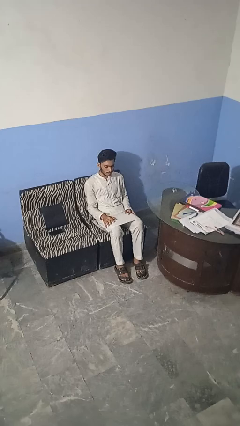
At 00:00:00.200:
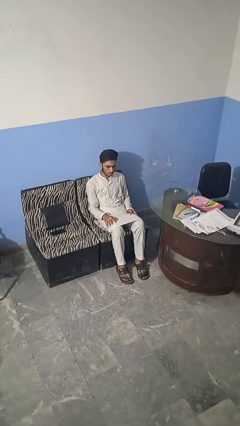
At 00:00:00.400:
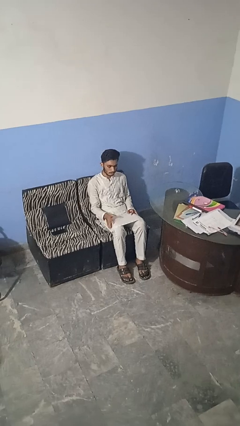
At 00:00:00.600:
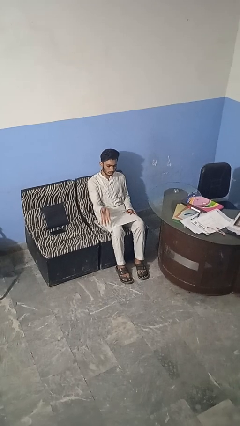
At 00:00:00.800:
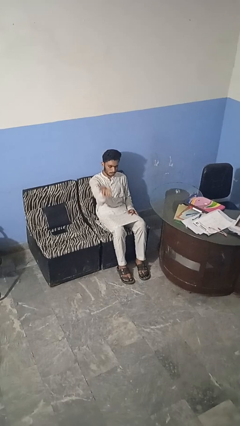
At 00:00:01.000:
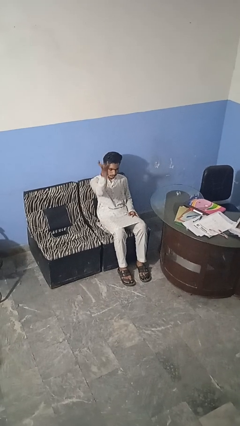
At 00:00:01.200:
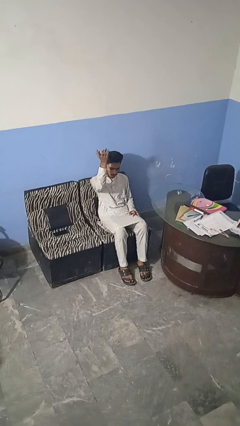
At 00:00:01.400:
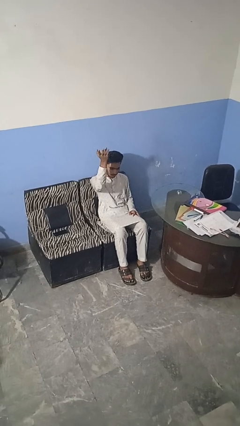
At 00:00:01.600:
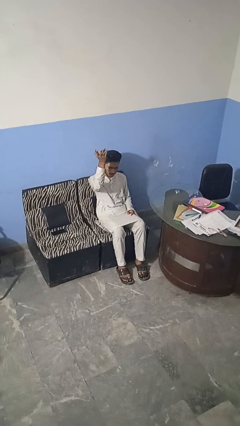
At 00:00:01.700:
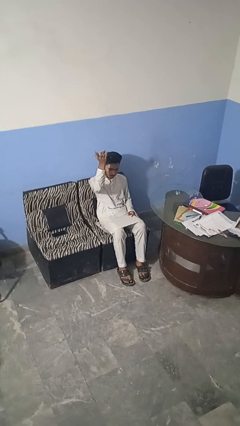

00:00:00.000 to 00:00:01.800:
person gestures swipe up

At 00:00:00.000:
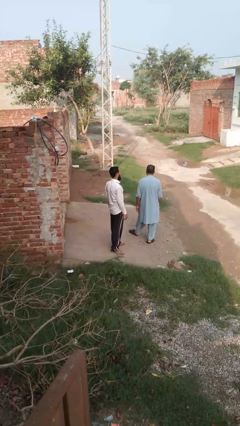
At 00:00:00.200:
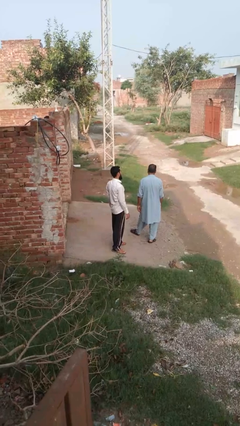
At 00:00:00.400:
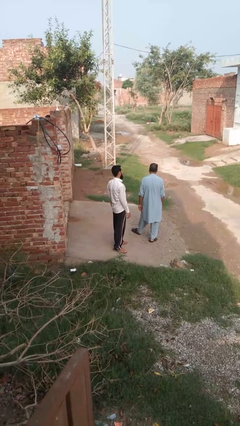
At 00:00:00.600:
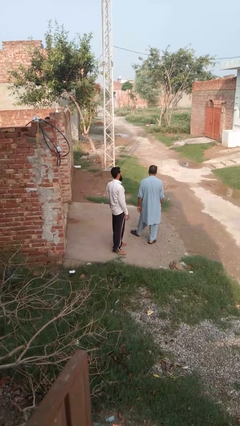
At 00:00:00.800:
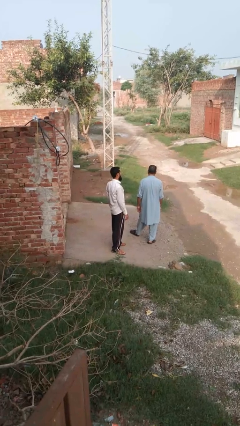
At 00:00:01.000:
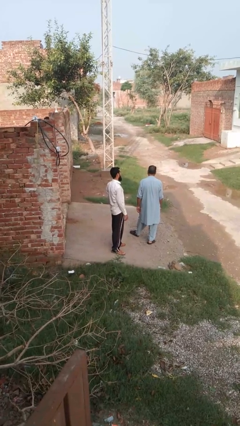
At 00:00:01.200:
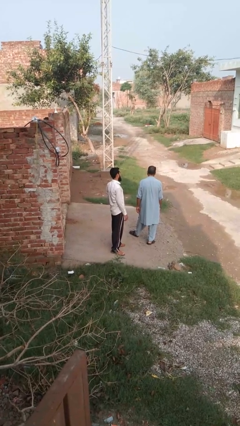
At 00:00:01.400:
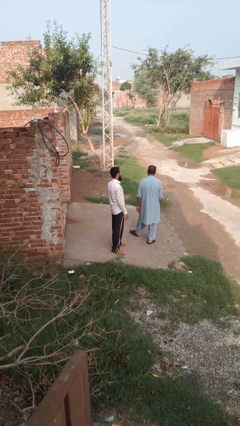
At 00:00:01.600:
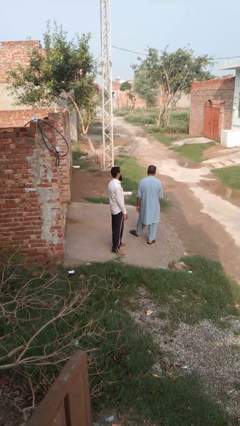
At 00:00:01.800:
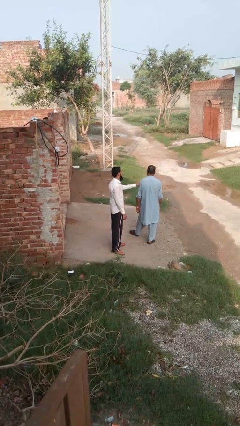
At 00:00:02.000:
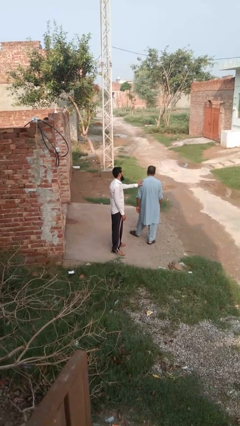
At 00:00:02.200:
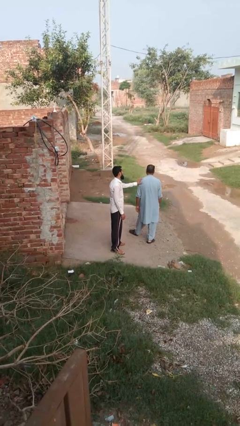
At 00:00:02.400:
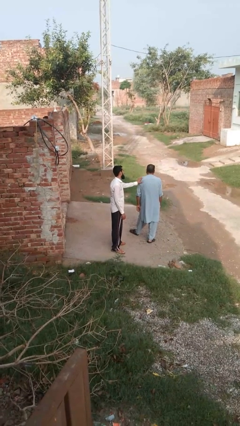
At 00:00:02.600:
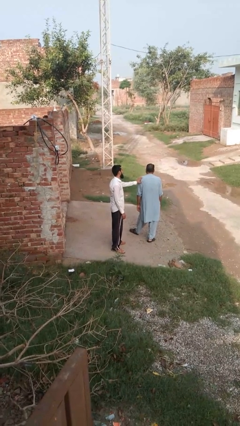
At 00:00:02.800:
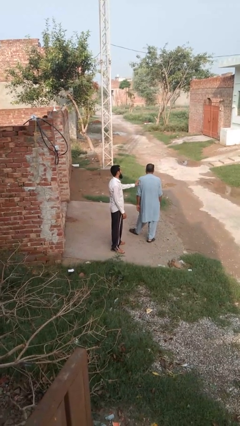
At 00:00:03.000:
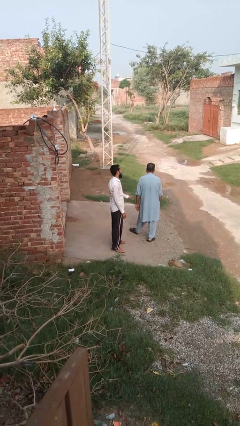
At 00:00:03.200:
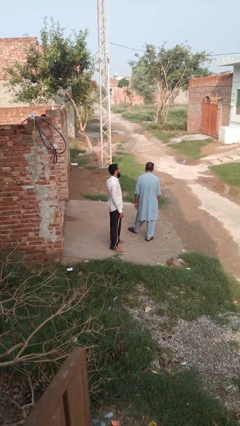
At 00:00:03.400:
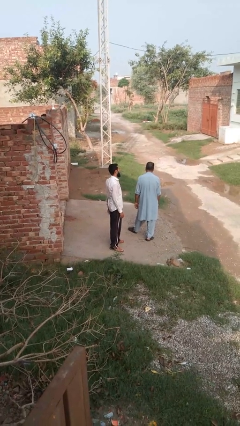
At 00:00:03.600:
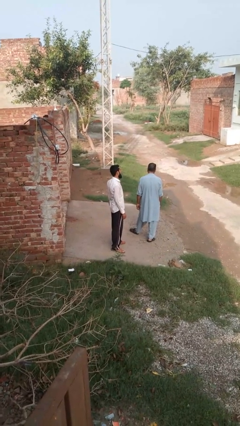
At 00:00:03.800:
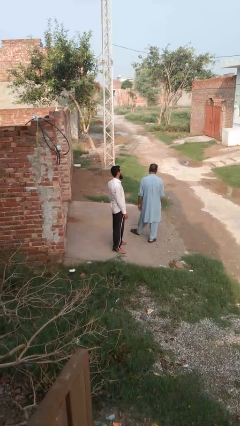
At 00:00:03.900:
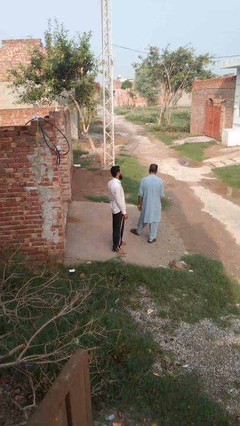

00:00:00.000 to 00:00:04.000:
person touches back of person

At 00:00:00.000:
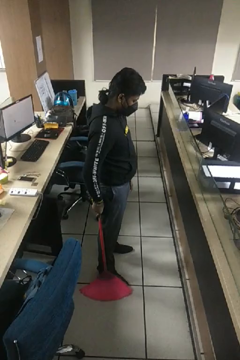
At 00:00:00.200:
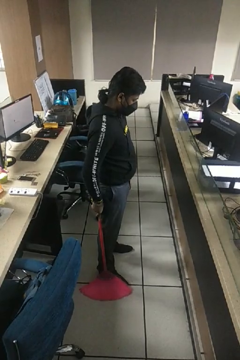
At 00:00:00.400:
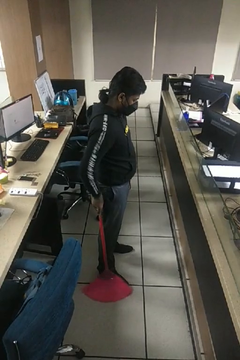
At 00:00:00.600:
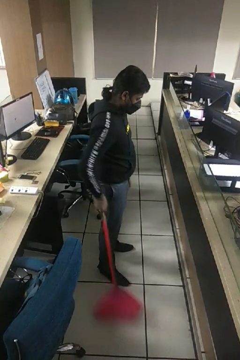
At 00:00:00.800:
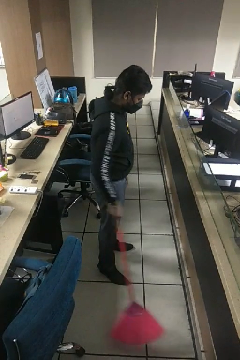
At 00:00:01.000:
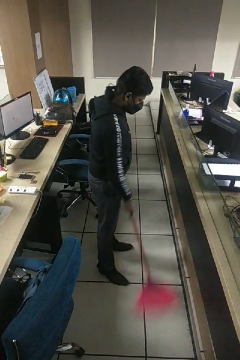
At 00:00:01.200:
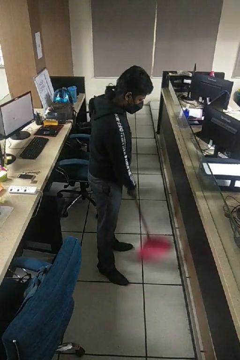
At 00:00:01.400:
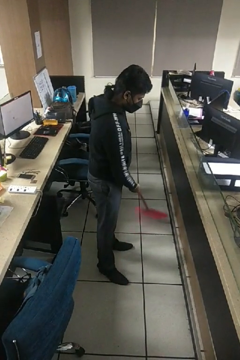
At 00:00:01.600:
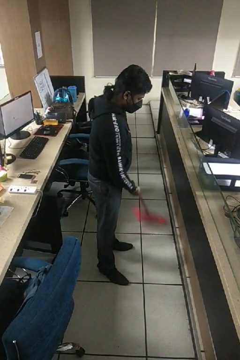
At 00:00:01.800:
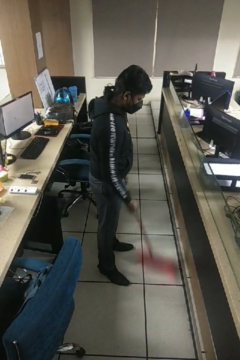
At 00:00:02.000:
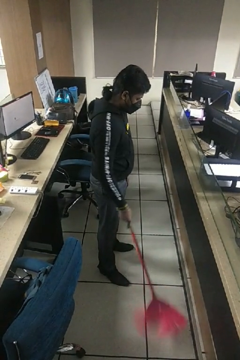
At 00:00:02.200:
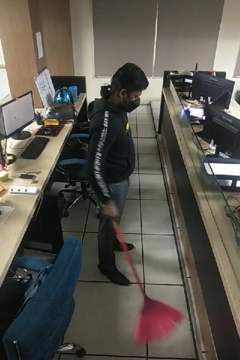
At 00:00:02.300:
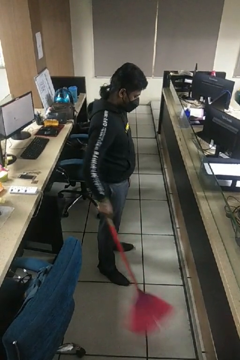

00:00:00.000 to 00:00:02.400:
person sweeps floor

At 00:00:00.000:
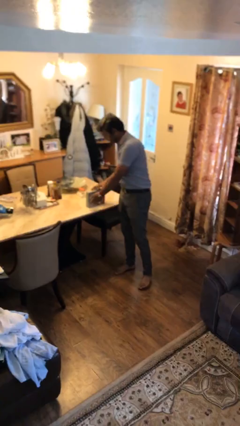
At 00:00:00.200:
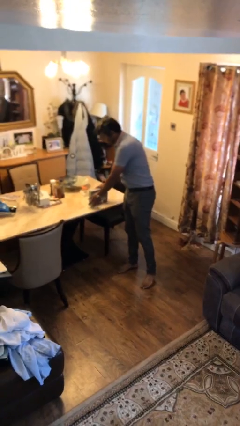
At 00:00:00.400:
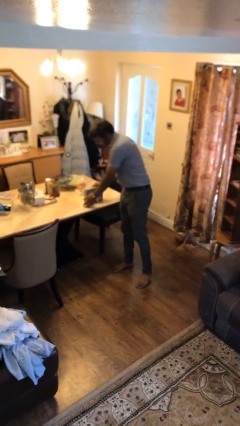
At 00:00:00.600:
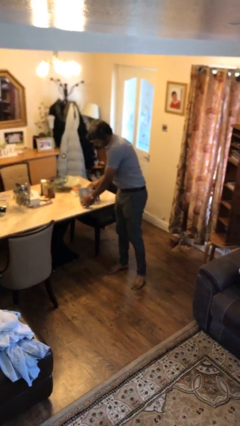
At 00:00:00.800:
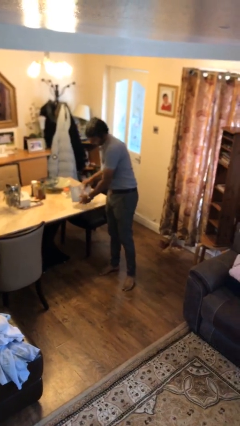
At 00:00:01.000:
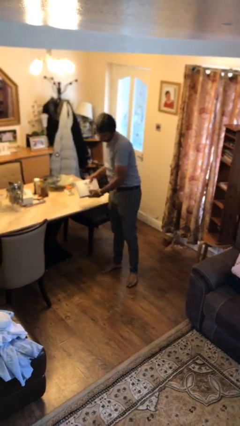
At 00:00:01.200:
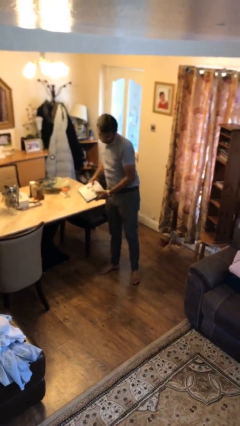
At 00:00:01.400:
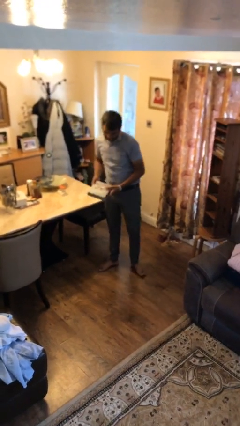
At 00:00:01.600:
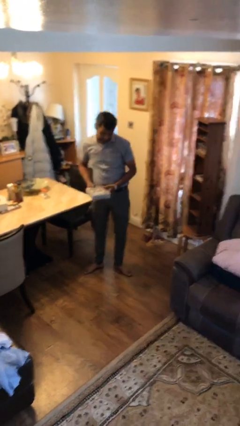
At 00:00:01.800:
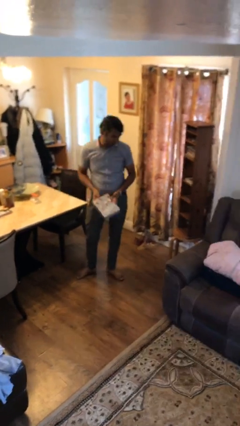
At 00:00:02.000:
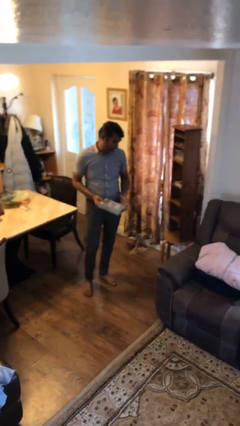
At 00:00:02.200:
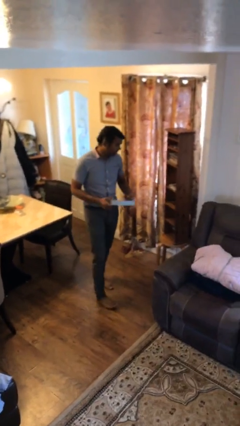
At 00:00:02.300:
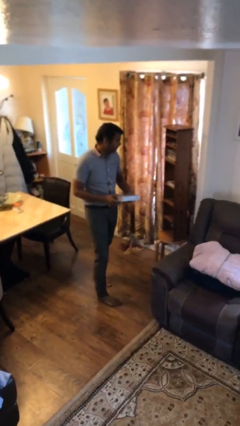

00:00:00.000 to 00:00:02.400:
person picks up object from table

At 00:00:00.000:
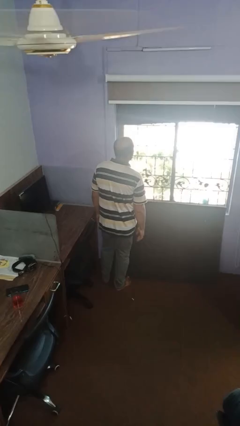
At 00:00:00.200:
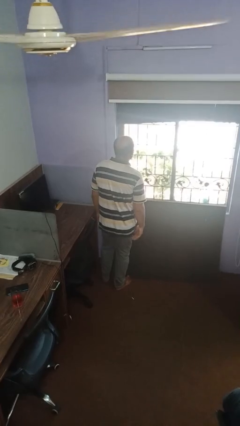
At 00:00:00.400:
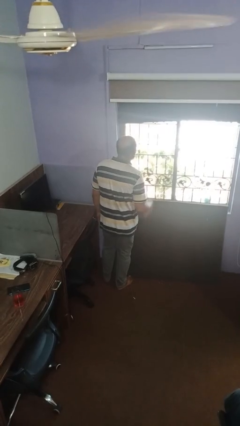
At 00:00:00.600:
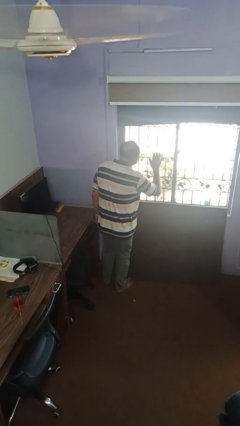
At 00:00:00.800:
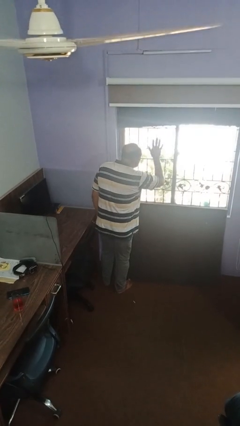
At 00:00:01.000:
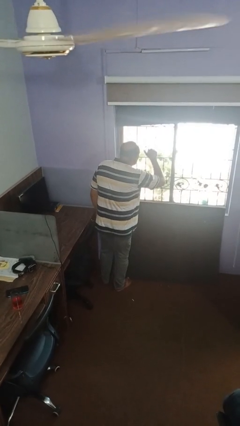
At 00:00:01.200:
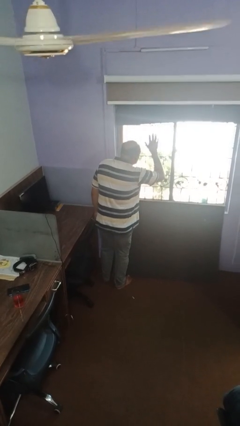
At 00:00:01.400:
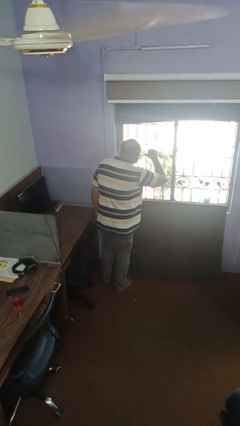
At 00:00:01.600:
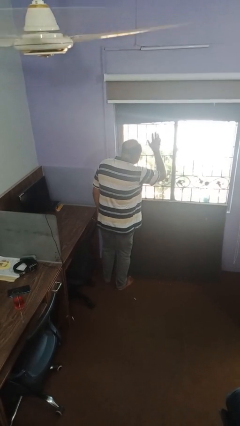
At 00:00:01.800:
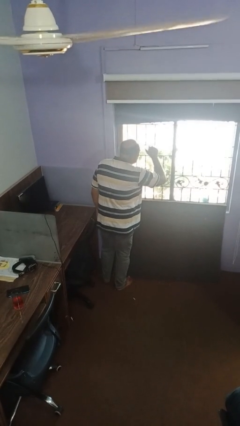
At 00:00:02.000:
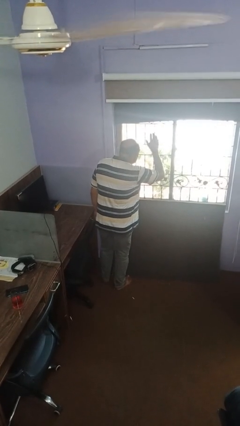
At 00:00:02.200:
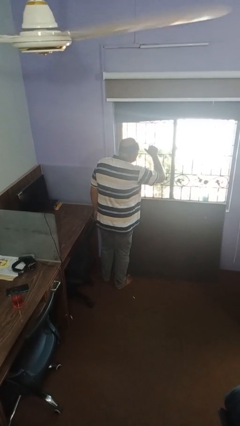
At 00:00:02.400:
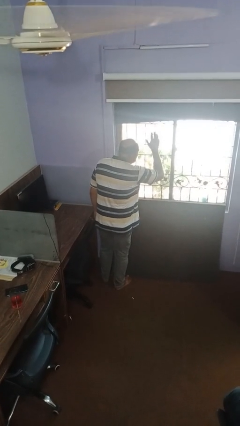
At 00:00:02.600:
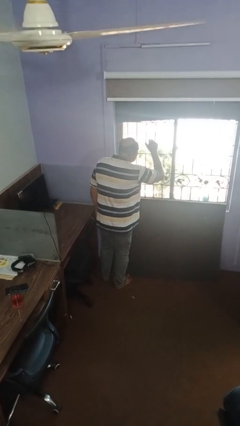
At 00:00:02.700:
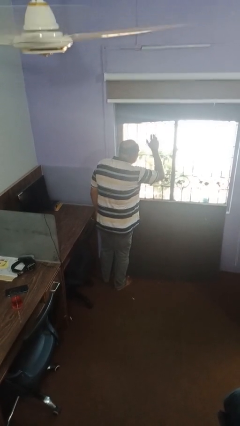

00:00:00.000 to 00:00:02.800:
person gestures come here

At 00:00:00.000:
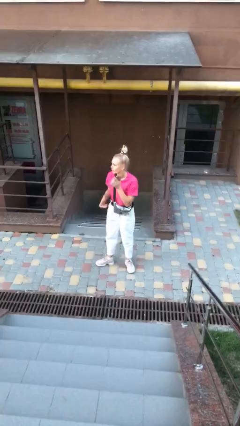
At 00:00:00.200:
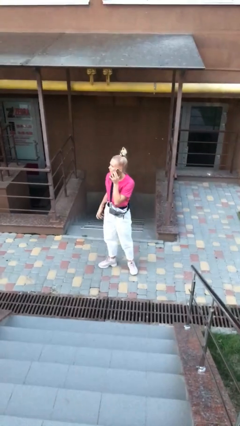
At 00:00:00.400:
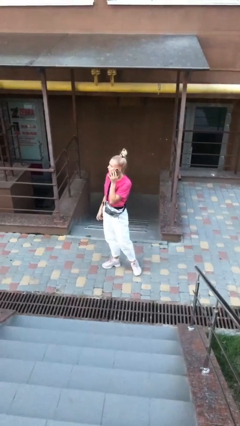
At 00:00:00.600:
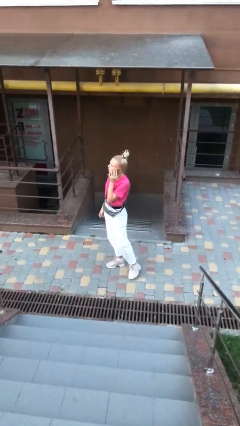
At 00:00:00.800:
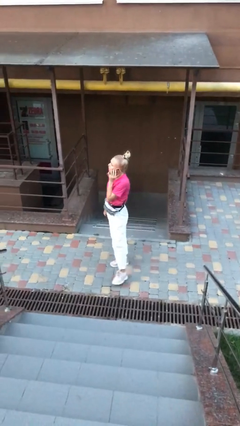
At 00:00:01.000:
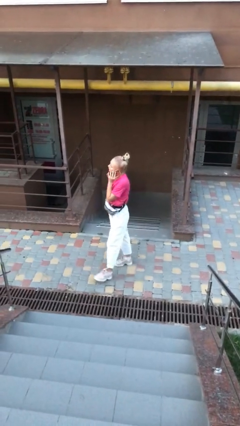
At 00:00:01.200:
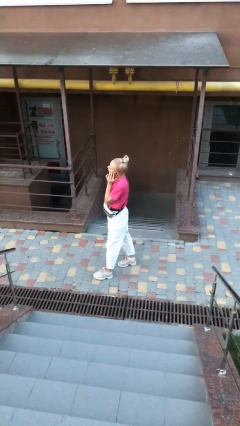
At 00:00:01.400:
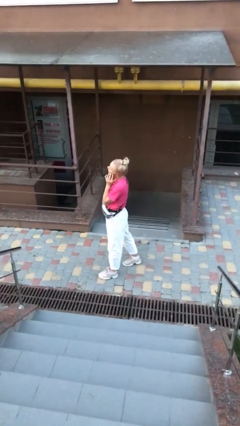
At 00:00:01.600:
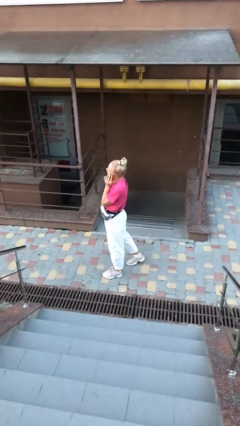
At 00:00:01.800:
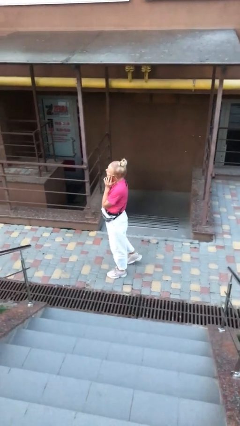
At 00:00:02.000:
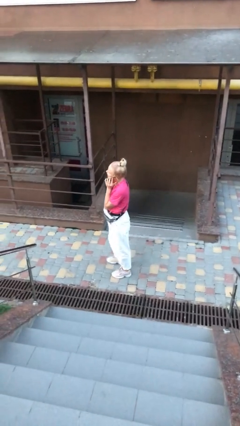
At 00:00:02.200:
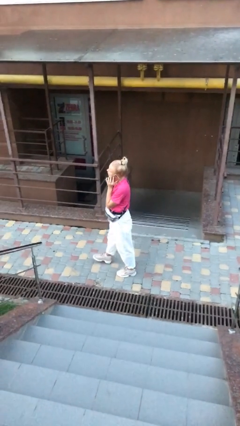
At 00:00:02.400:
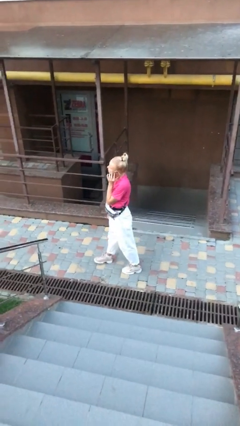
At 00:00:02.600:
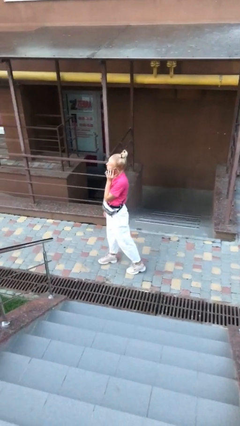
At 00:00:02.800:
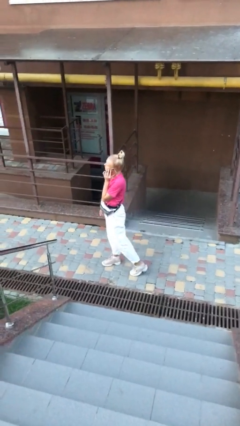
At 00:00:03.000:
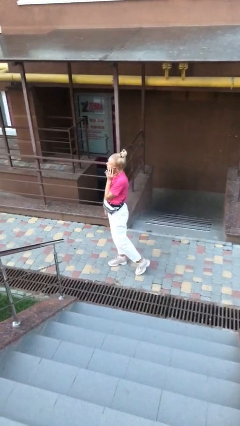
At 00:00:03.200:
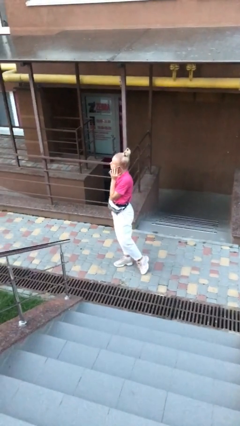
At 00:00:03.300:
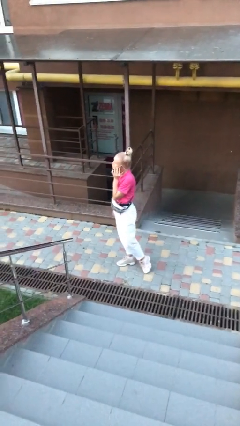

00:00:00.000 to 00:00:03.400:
person talks on phone

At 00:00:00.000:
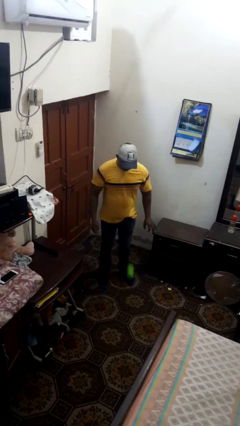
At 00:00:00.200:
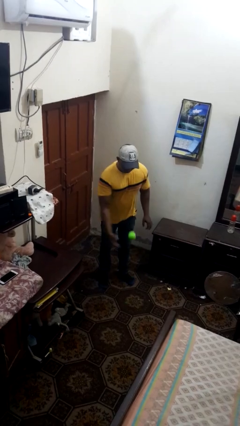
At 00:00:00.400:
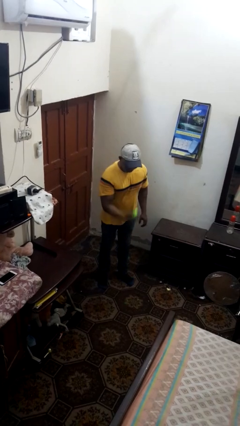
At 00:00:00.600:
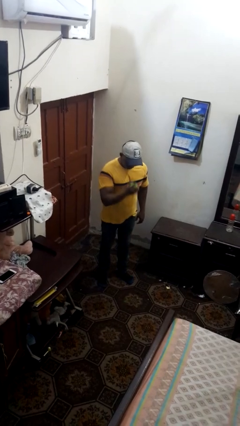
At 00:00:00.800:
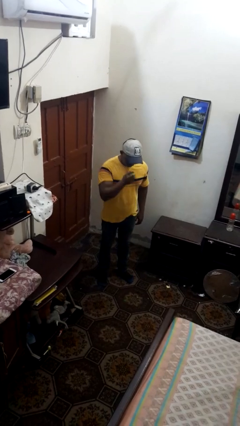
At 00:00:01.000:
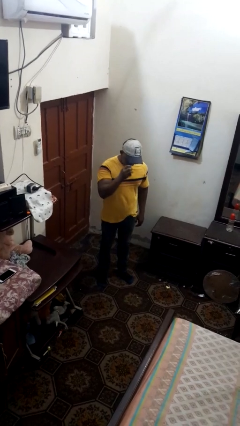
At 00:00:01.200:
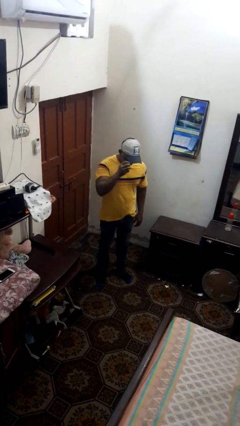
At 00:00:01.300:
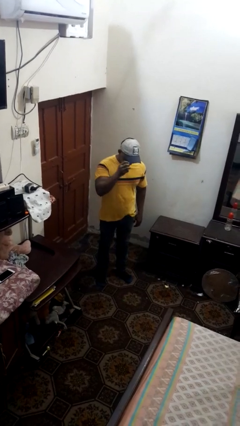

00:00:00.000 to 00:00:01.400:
person bounces ball on floor
